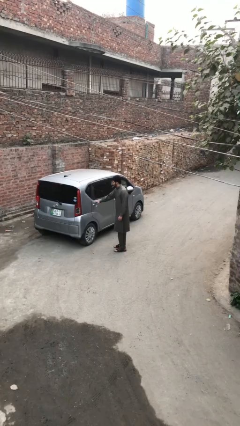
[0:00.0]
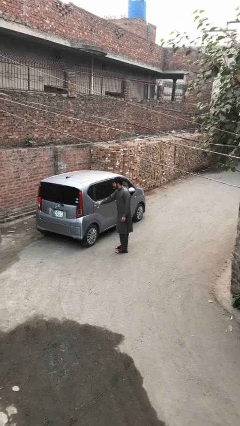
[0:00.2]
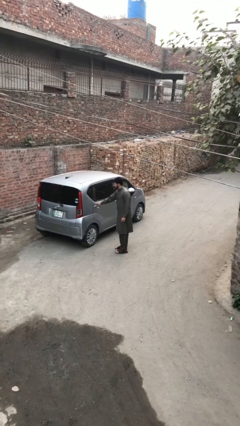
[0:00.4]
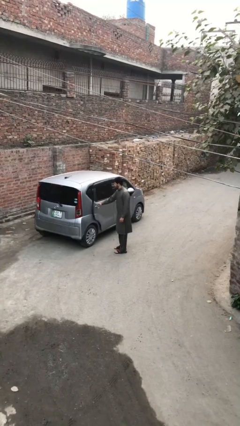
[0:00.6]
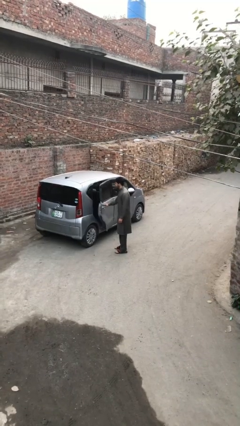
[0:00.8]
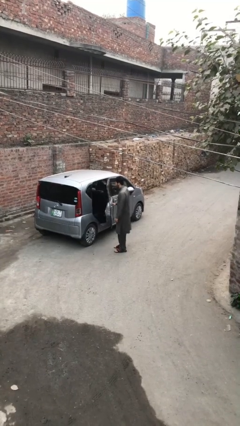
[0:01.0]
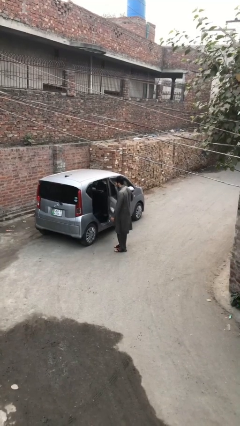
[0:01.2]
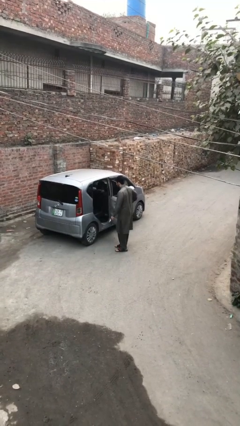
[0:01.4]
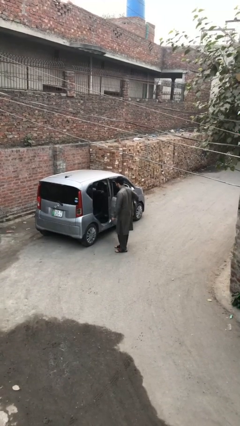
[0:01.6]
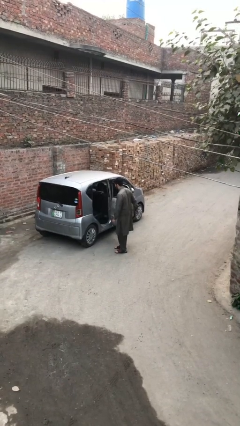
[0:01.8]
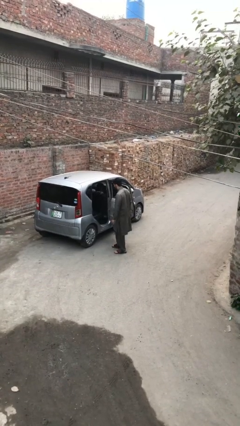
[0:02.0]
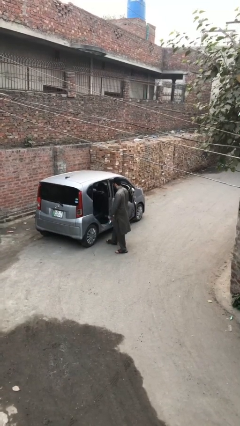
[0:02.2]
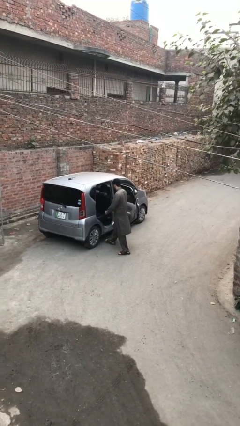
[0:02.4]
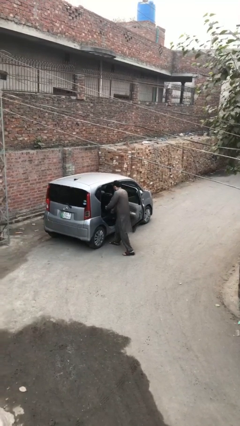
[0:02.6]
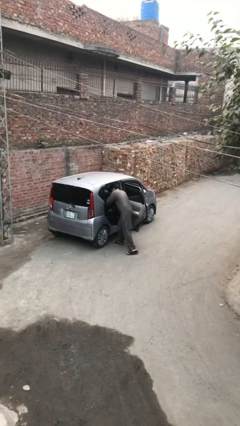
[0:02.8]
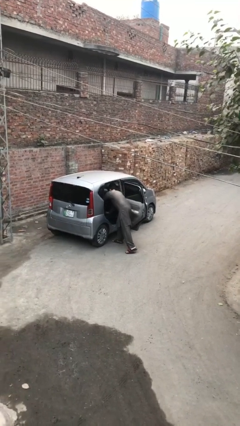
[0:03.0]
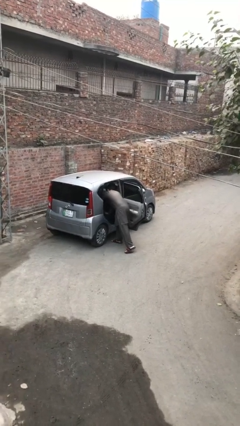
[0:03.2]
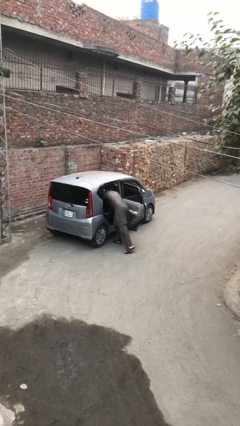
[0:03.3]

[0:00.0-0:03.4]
person opens car door

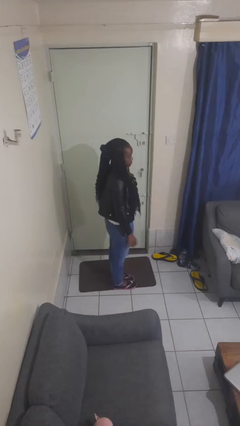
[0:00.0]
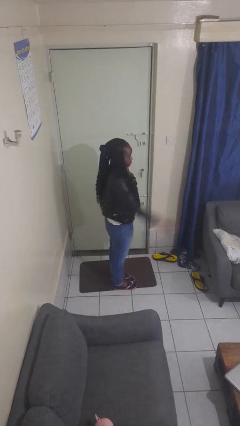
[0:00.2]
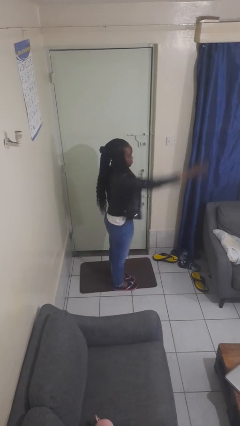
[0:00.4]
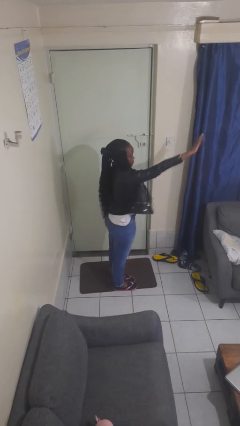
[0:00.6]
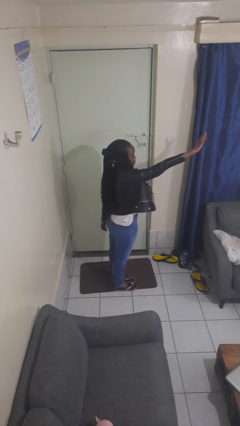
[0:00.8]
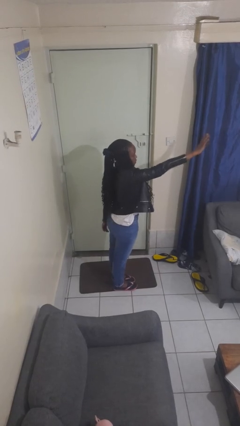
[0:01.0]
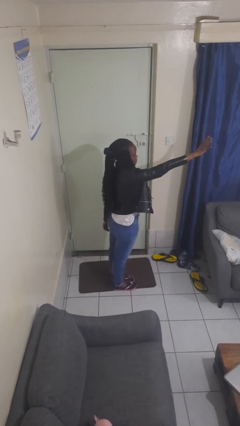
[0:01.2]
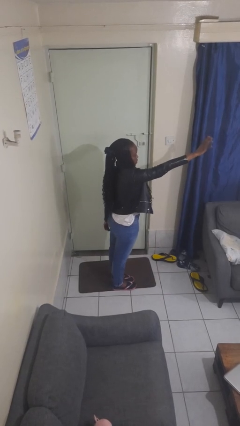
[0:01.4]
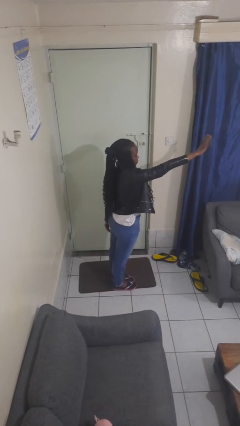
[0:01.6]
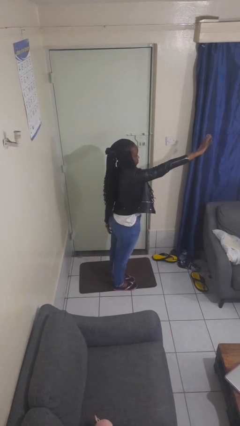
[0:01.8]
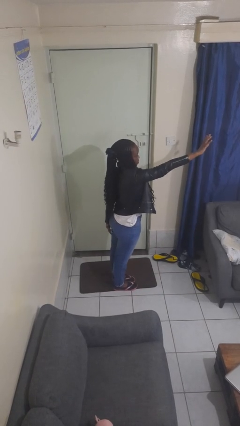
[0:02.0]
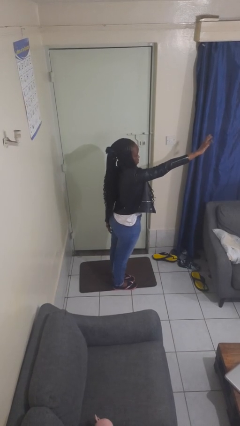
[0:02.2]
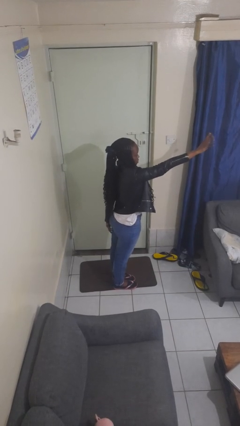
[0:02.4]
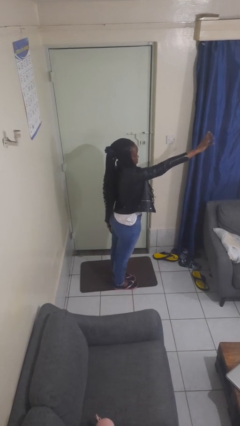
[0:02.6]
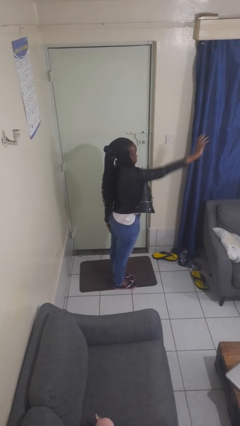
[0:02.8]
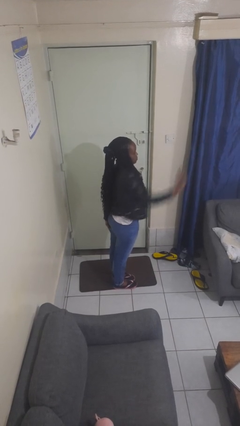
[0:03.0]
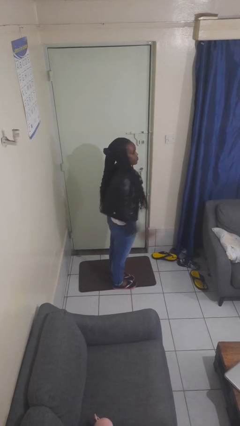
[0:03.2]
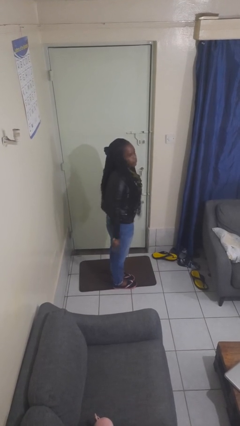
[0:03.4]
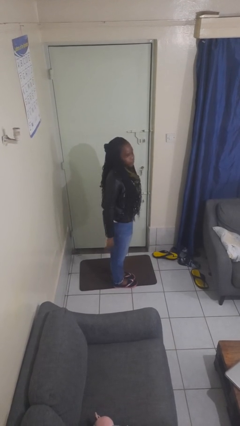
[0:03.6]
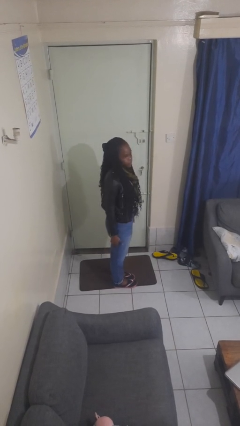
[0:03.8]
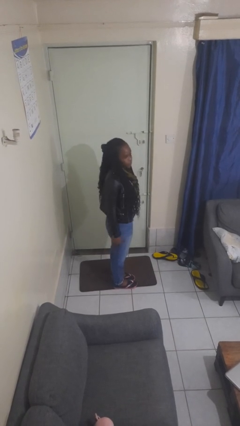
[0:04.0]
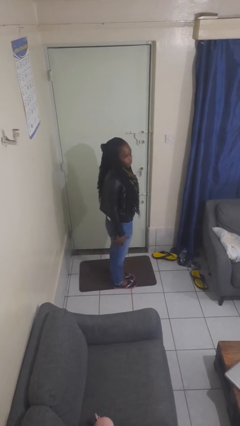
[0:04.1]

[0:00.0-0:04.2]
person waves at person

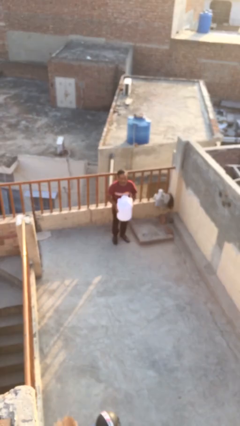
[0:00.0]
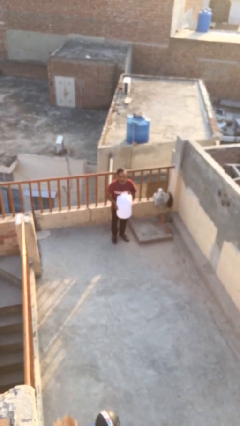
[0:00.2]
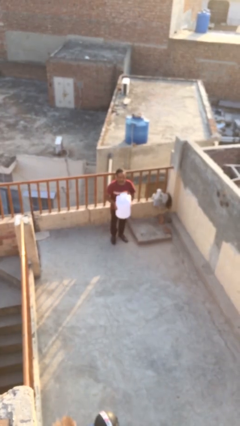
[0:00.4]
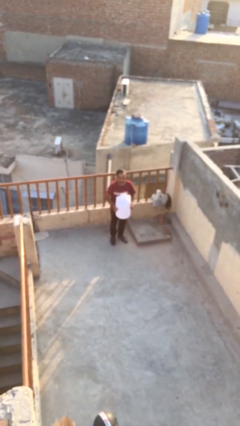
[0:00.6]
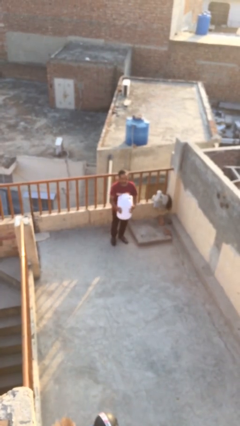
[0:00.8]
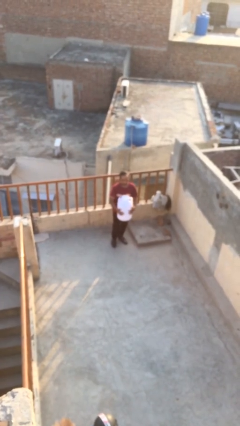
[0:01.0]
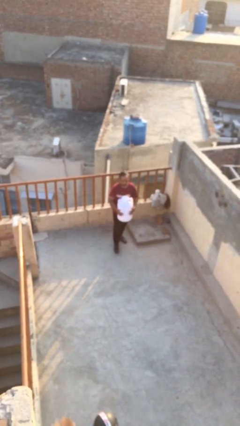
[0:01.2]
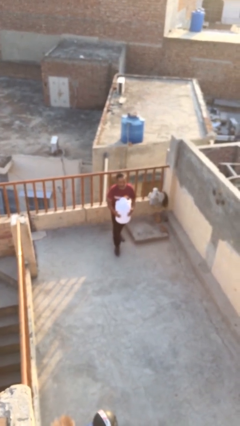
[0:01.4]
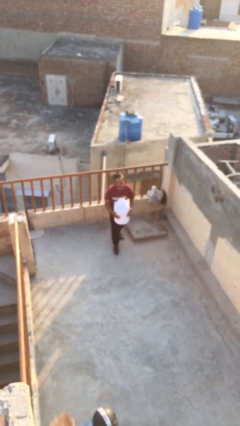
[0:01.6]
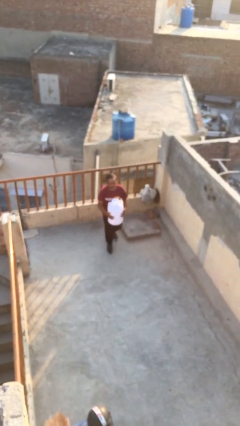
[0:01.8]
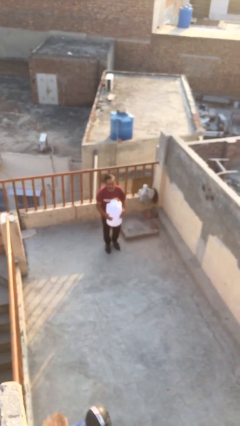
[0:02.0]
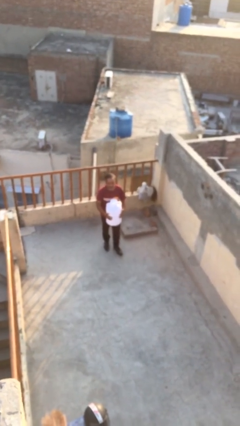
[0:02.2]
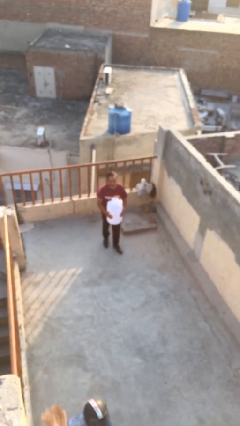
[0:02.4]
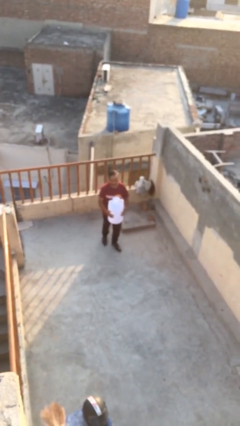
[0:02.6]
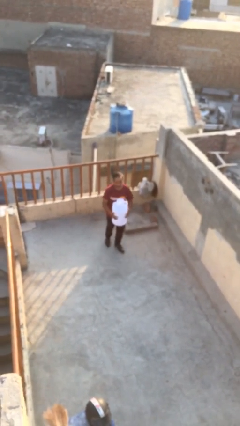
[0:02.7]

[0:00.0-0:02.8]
person carries heavy object

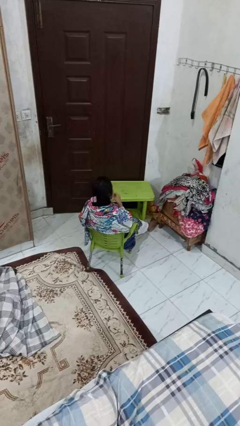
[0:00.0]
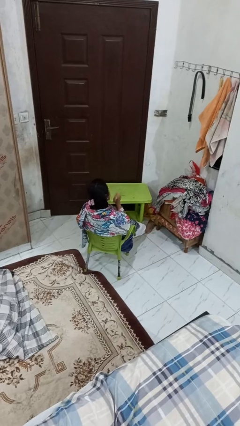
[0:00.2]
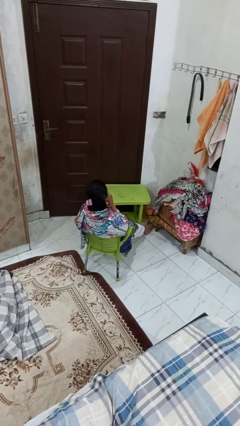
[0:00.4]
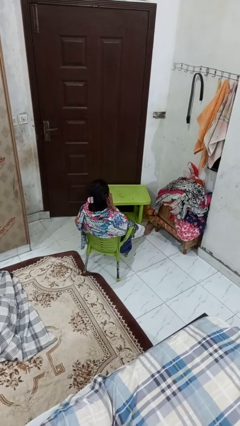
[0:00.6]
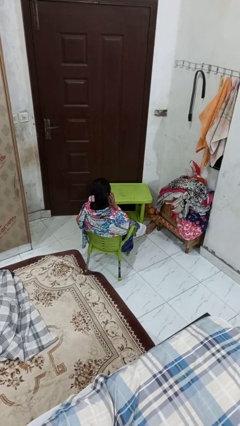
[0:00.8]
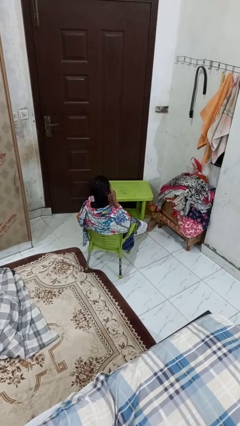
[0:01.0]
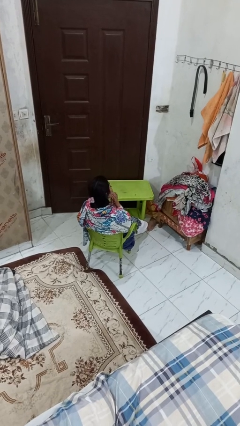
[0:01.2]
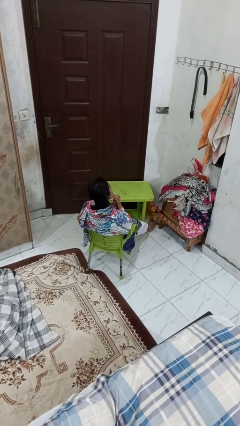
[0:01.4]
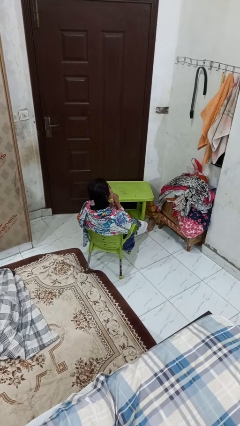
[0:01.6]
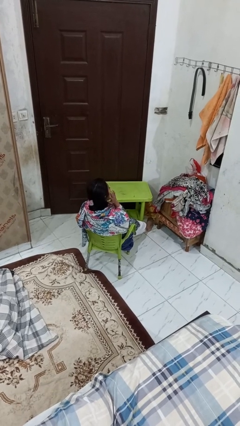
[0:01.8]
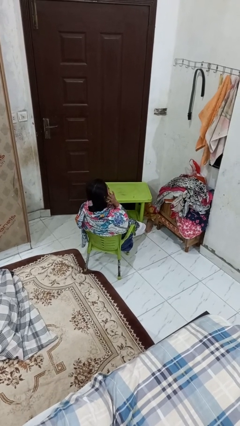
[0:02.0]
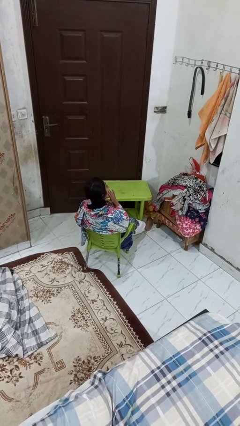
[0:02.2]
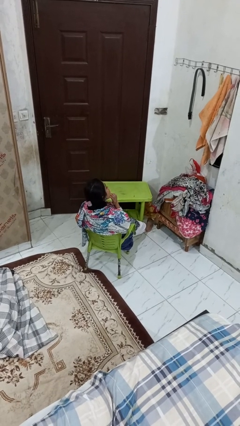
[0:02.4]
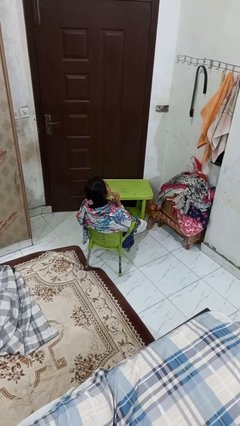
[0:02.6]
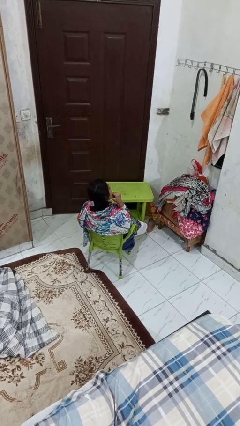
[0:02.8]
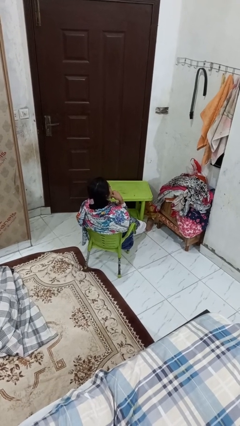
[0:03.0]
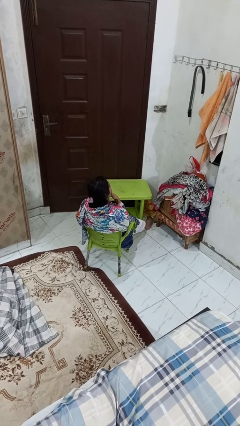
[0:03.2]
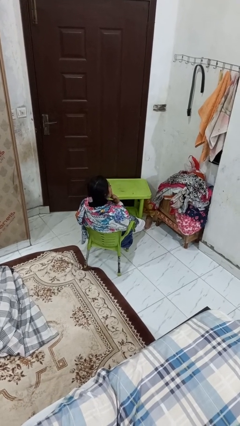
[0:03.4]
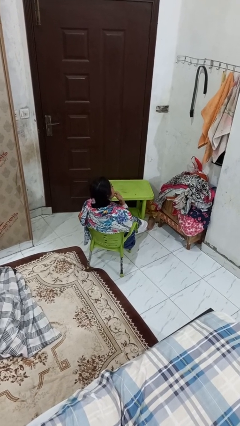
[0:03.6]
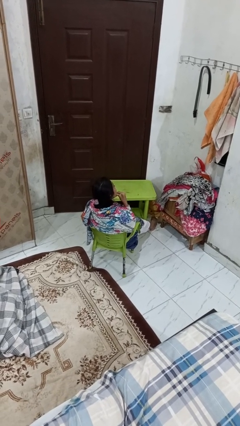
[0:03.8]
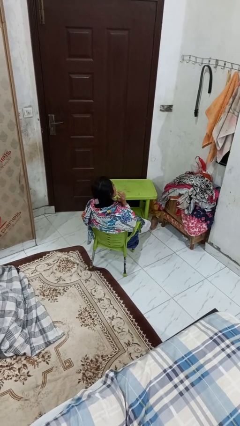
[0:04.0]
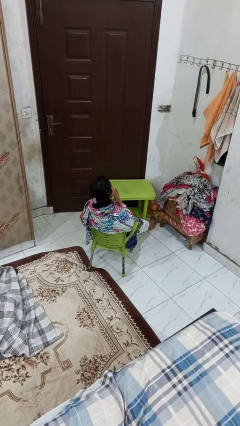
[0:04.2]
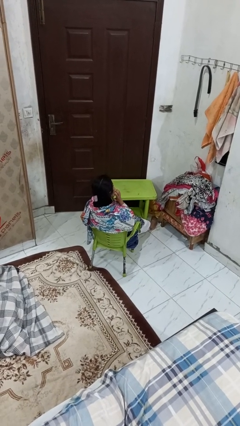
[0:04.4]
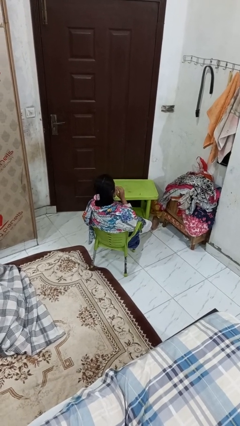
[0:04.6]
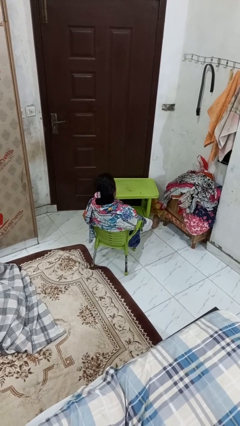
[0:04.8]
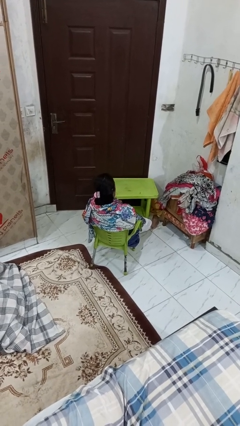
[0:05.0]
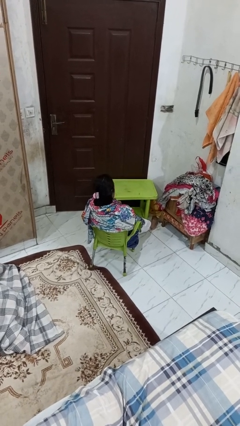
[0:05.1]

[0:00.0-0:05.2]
person strokes chin

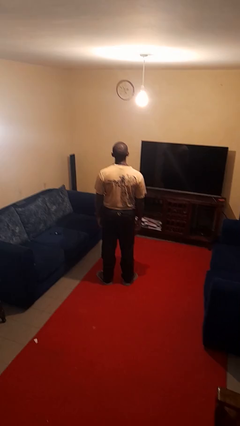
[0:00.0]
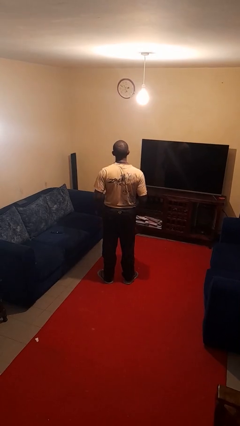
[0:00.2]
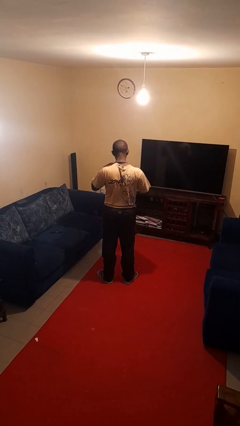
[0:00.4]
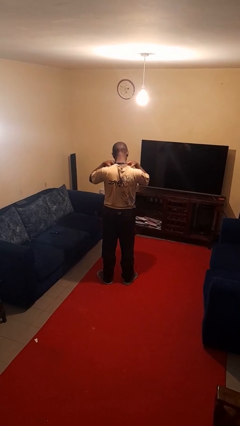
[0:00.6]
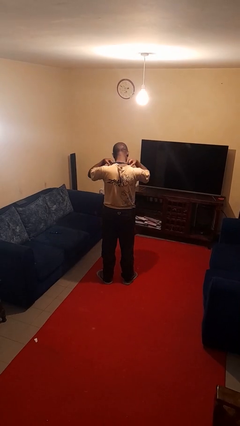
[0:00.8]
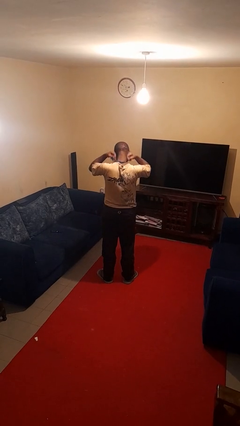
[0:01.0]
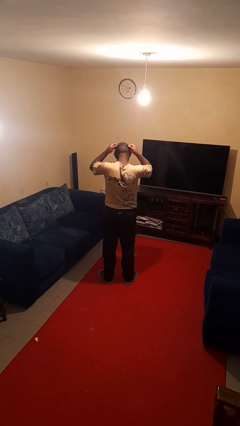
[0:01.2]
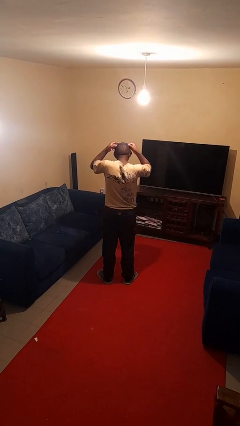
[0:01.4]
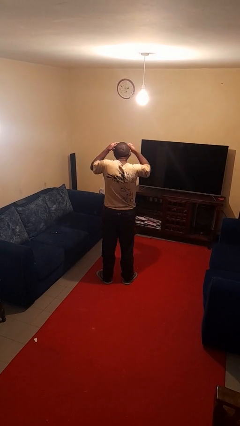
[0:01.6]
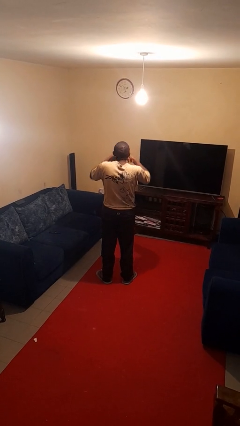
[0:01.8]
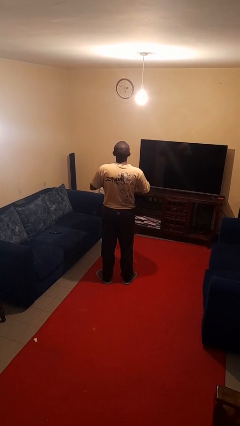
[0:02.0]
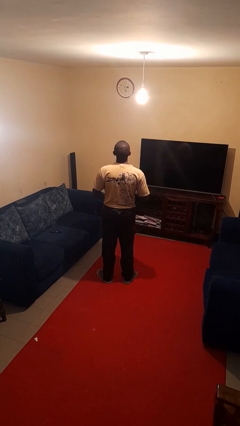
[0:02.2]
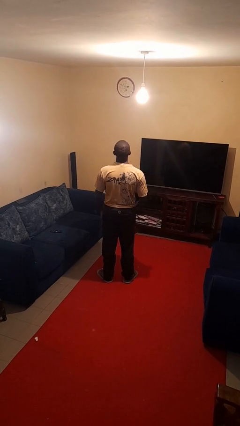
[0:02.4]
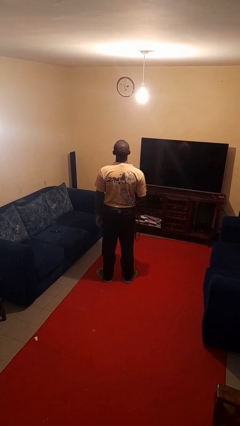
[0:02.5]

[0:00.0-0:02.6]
person takes off necklace
